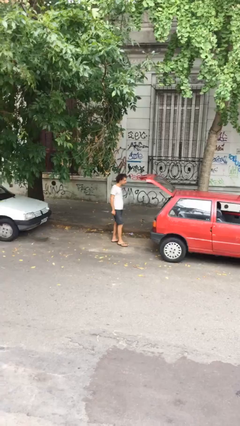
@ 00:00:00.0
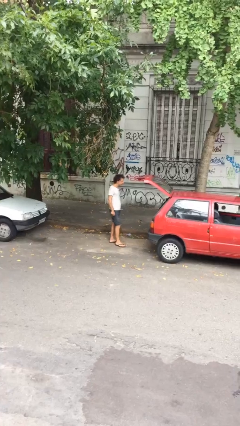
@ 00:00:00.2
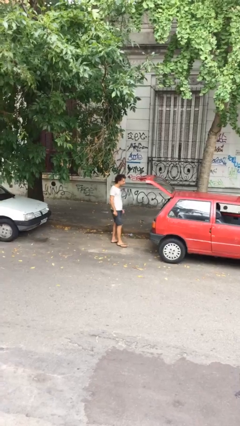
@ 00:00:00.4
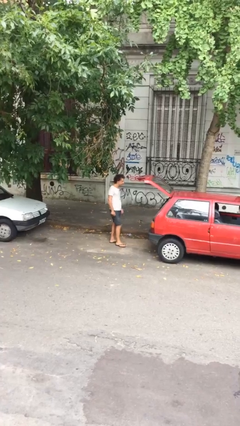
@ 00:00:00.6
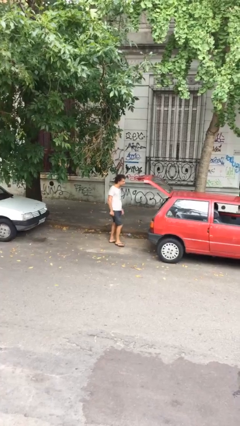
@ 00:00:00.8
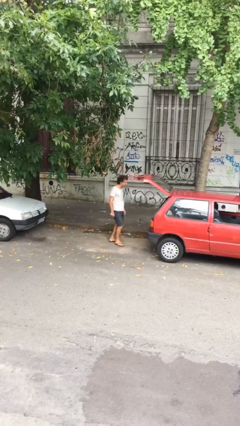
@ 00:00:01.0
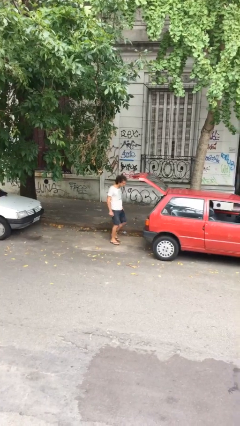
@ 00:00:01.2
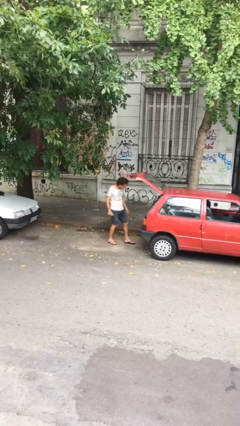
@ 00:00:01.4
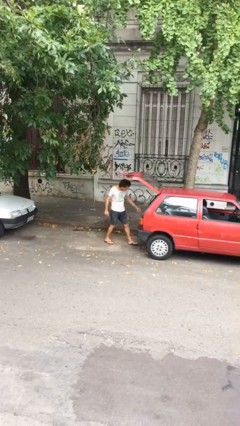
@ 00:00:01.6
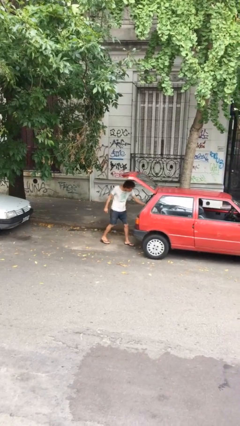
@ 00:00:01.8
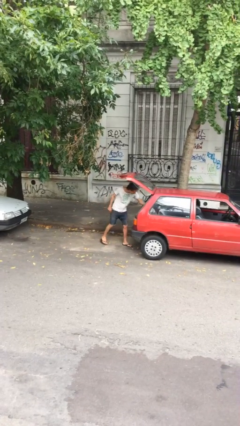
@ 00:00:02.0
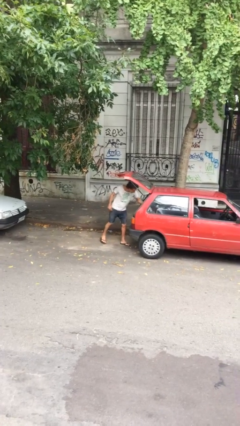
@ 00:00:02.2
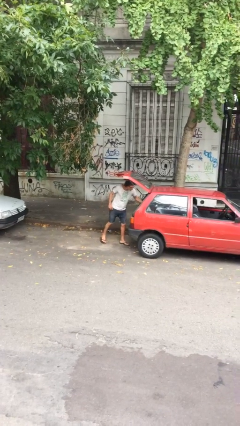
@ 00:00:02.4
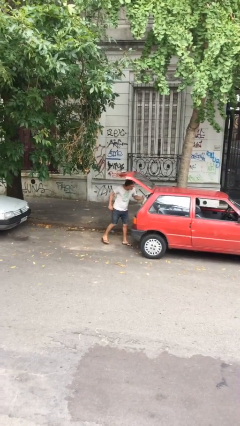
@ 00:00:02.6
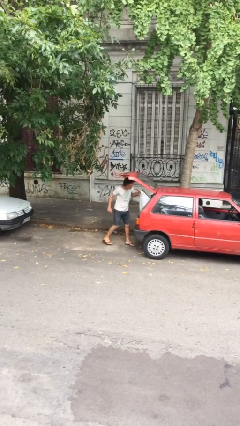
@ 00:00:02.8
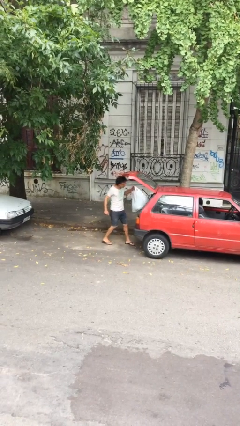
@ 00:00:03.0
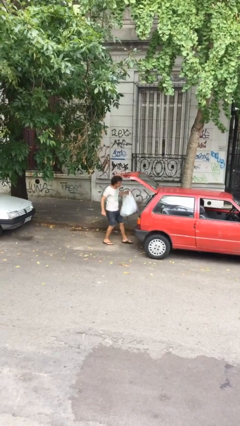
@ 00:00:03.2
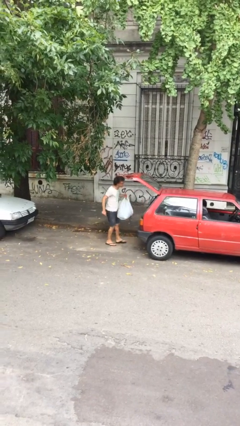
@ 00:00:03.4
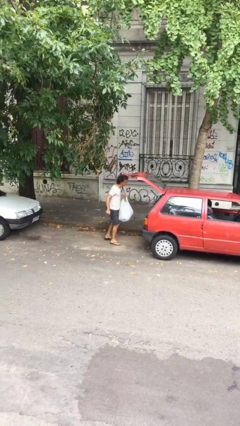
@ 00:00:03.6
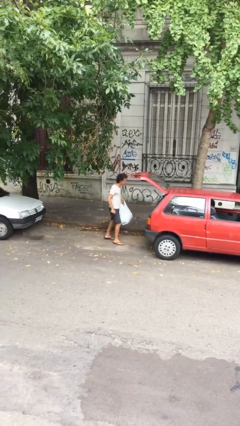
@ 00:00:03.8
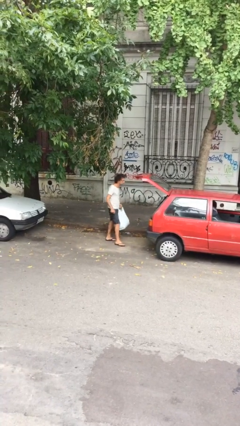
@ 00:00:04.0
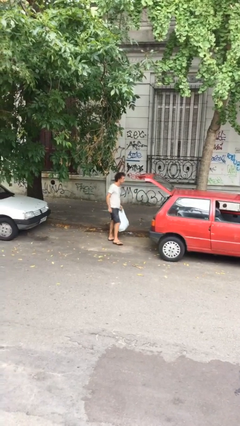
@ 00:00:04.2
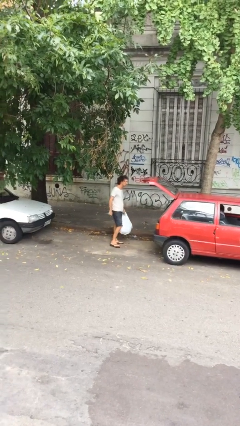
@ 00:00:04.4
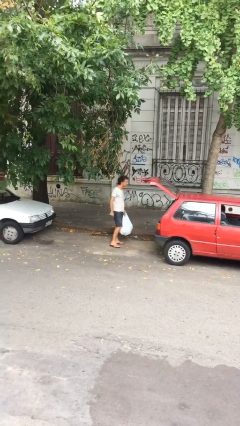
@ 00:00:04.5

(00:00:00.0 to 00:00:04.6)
person unloads car

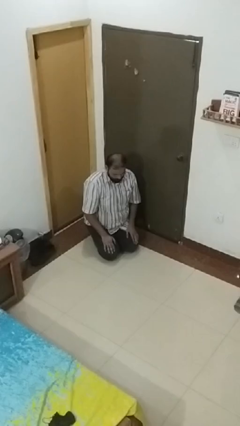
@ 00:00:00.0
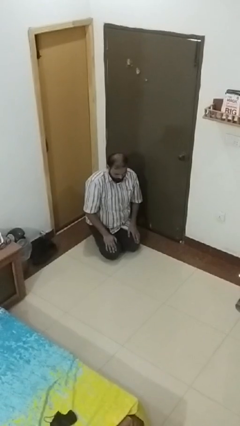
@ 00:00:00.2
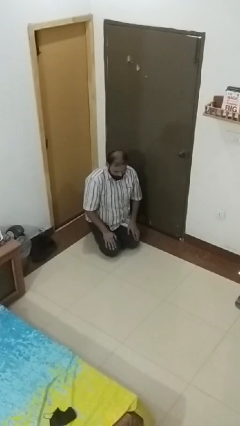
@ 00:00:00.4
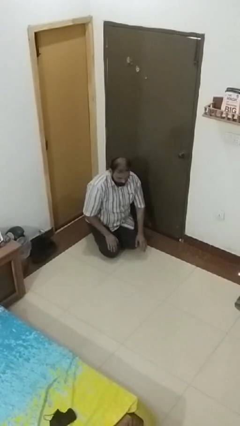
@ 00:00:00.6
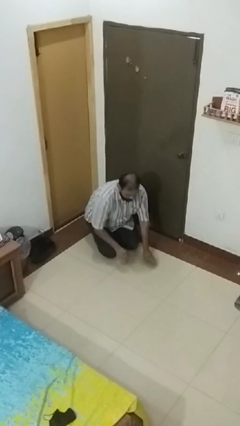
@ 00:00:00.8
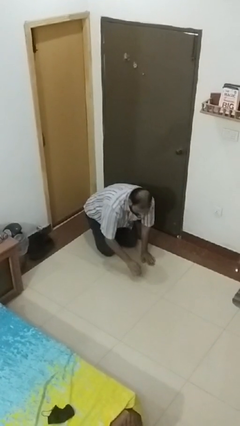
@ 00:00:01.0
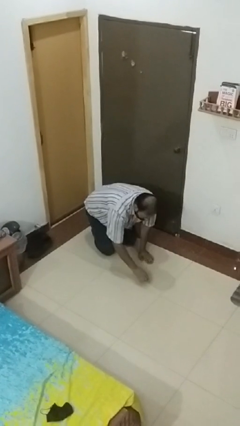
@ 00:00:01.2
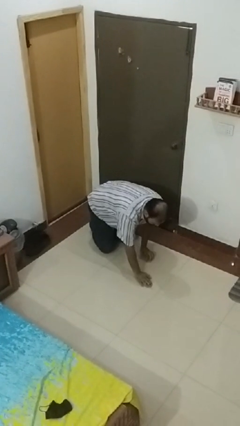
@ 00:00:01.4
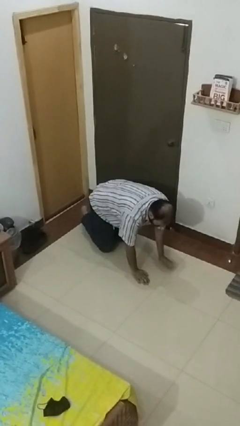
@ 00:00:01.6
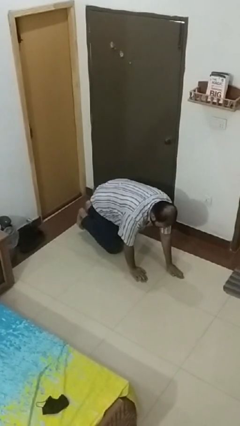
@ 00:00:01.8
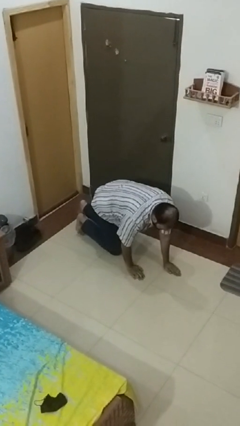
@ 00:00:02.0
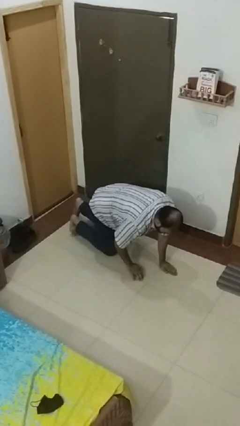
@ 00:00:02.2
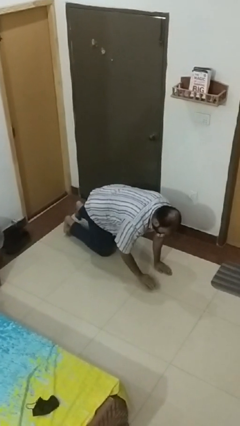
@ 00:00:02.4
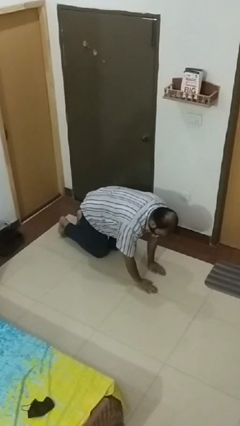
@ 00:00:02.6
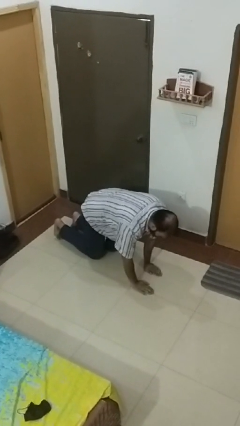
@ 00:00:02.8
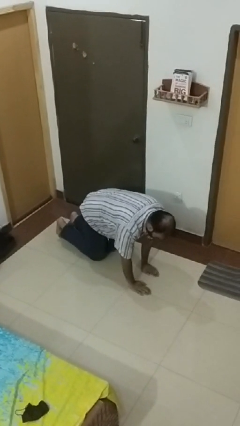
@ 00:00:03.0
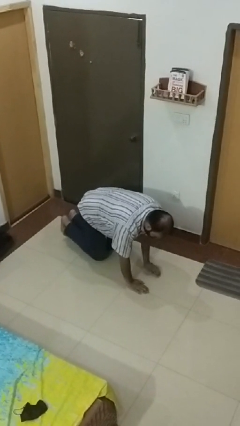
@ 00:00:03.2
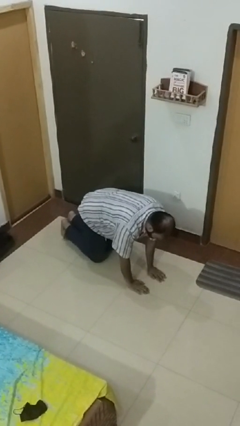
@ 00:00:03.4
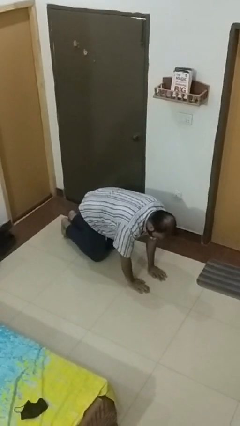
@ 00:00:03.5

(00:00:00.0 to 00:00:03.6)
person crawls

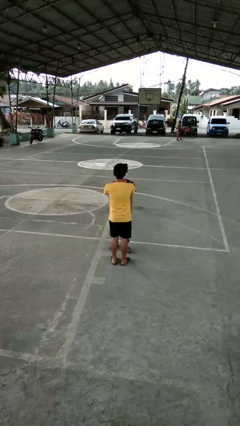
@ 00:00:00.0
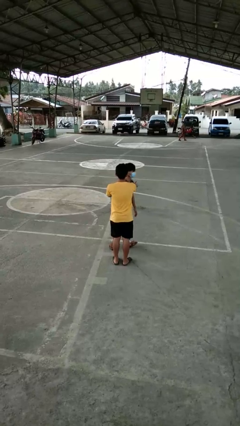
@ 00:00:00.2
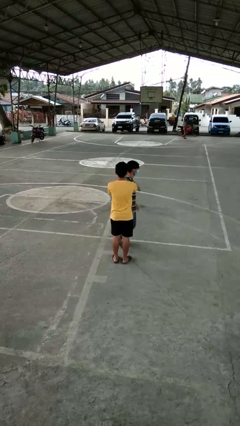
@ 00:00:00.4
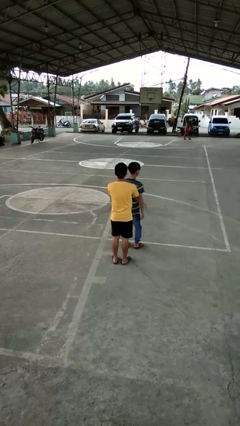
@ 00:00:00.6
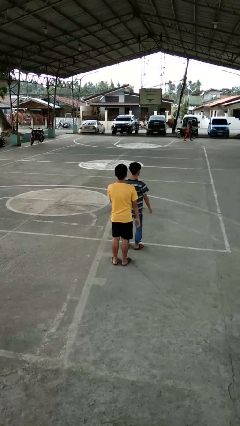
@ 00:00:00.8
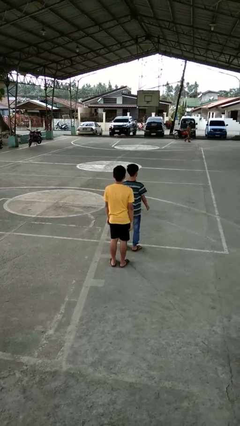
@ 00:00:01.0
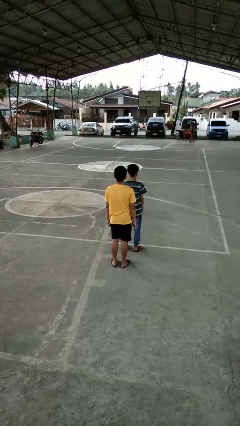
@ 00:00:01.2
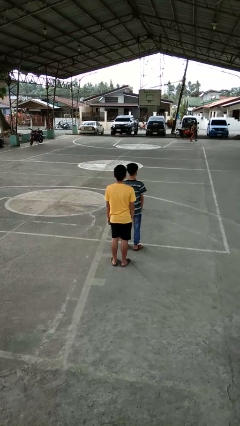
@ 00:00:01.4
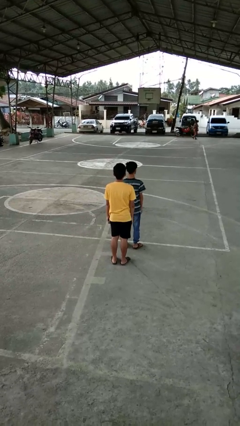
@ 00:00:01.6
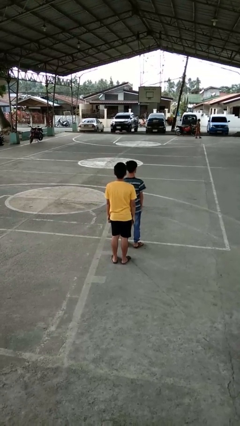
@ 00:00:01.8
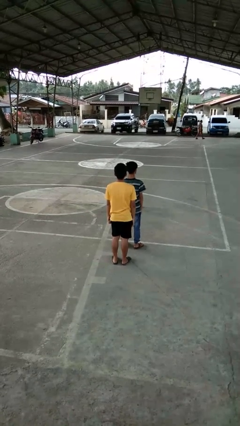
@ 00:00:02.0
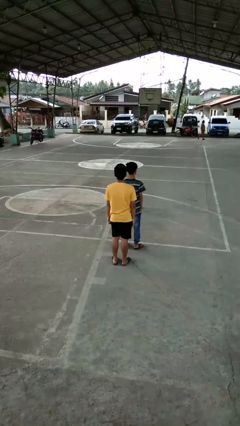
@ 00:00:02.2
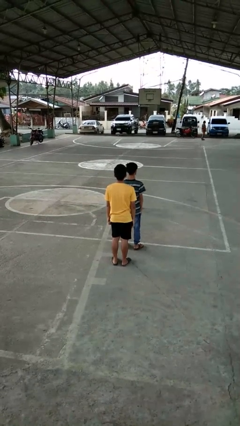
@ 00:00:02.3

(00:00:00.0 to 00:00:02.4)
person spins person around

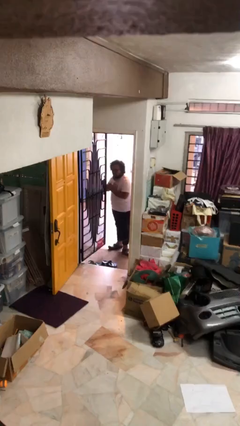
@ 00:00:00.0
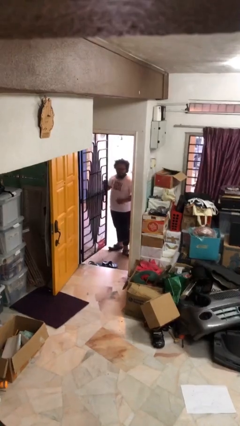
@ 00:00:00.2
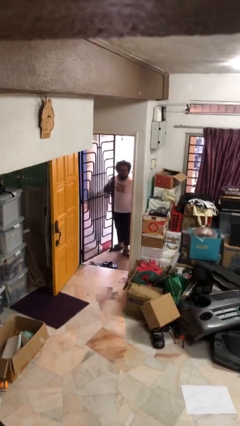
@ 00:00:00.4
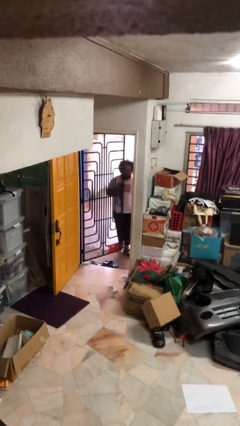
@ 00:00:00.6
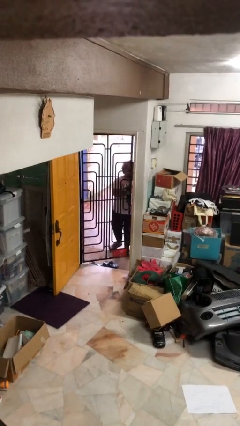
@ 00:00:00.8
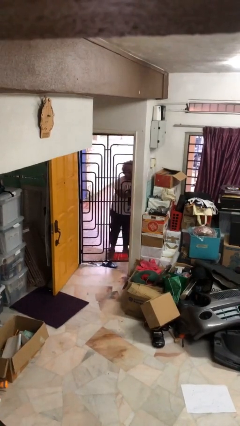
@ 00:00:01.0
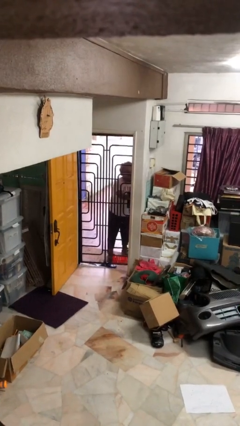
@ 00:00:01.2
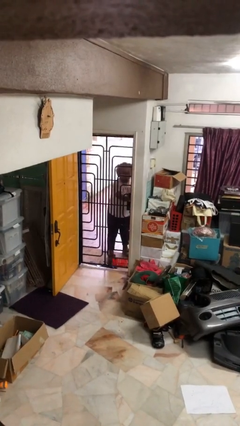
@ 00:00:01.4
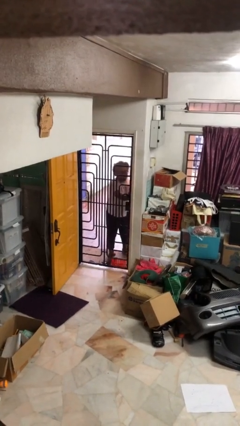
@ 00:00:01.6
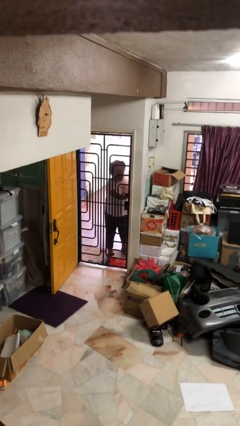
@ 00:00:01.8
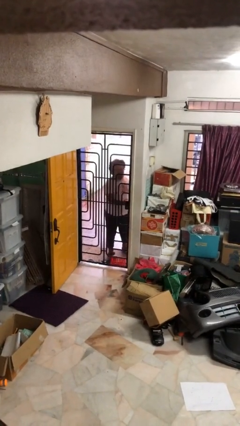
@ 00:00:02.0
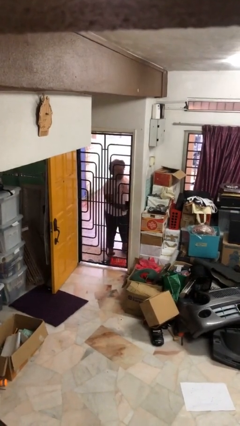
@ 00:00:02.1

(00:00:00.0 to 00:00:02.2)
person closes facility door

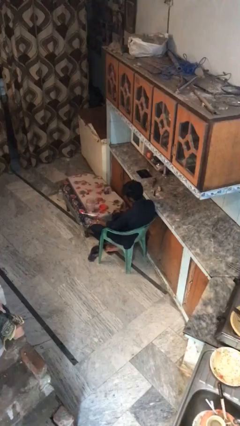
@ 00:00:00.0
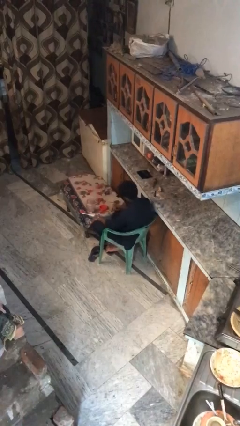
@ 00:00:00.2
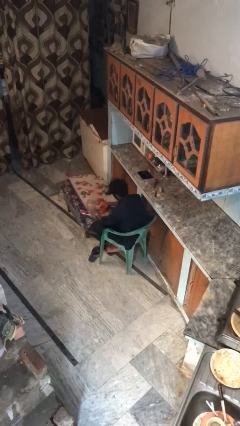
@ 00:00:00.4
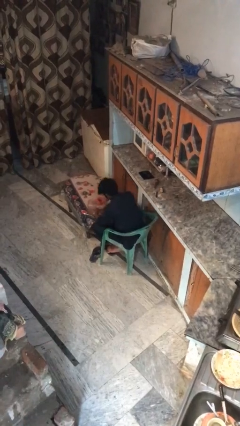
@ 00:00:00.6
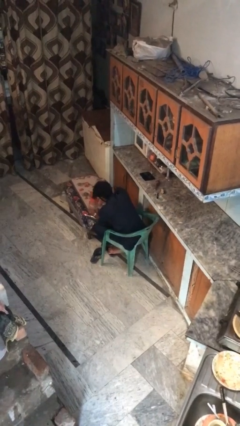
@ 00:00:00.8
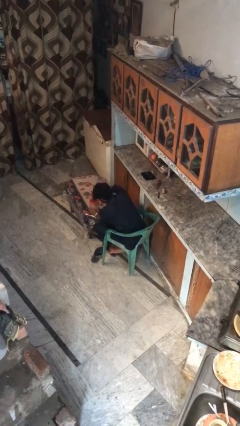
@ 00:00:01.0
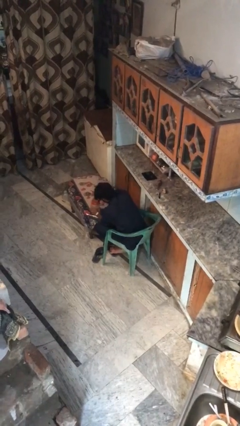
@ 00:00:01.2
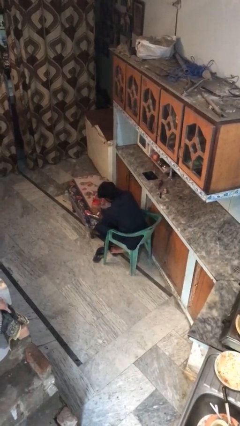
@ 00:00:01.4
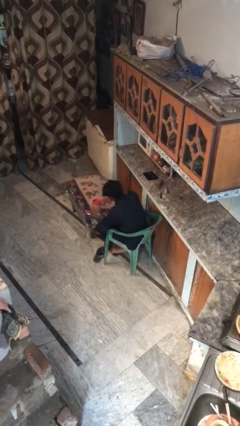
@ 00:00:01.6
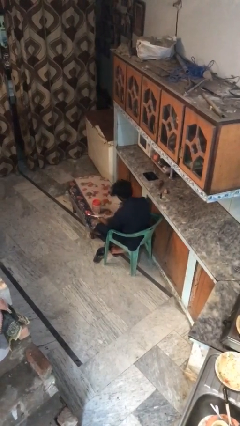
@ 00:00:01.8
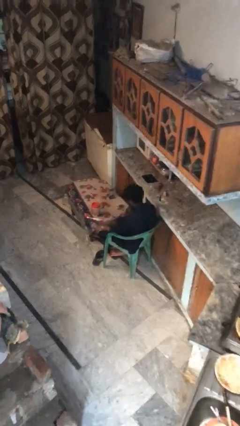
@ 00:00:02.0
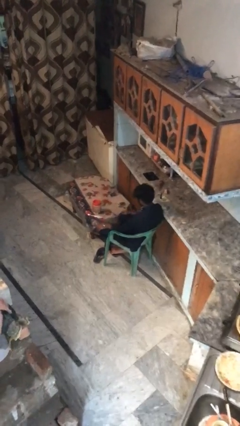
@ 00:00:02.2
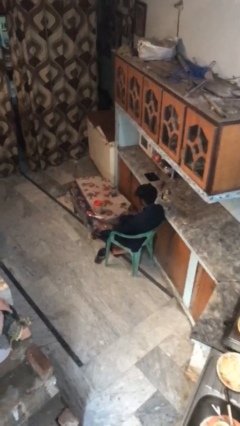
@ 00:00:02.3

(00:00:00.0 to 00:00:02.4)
person closes jar

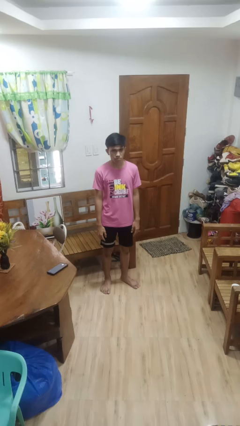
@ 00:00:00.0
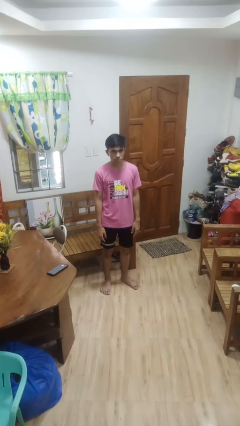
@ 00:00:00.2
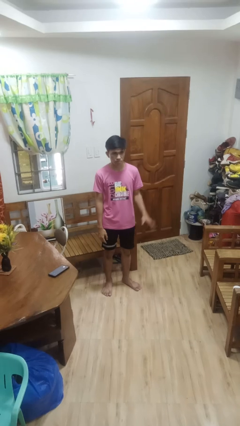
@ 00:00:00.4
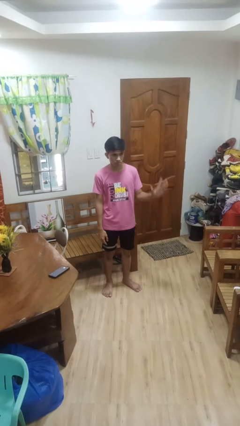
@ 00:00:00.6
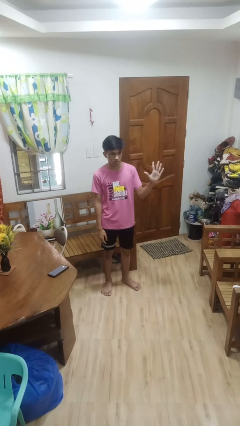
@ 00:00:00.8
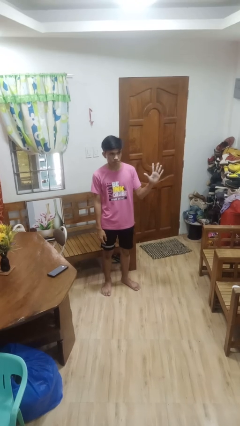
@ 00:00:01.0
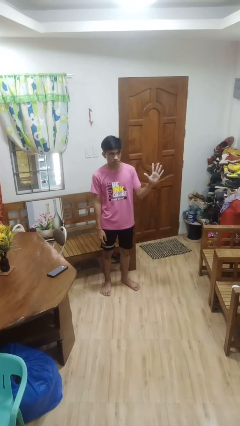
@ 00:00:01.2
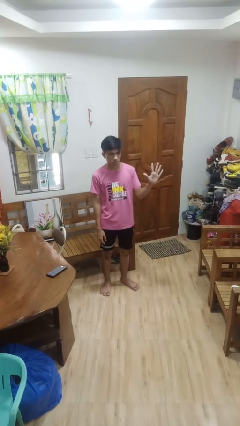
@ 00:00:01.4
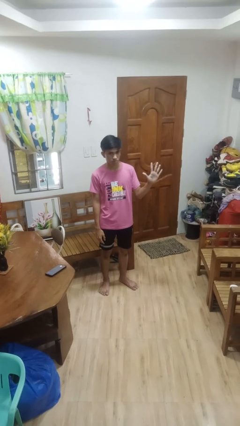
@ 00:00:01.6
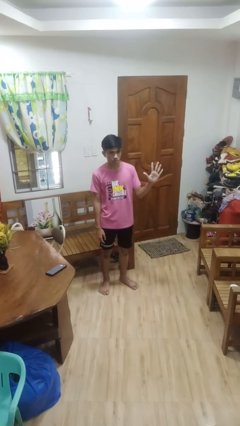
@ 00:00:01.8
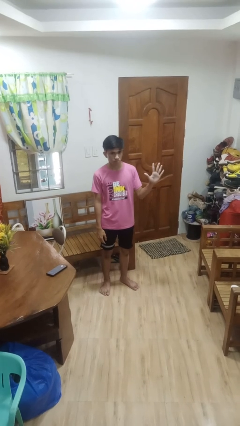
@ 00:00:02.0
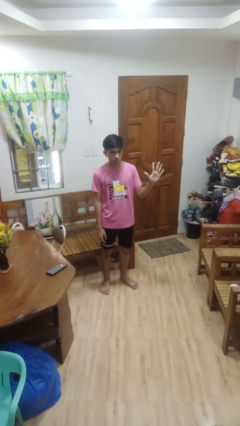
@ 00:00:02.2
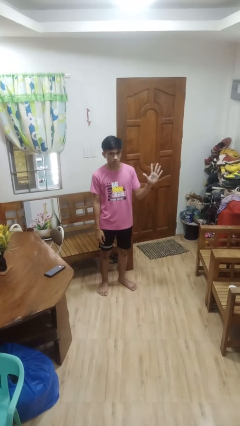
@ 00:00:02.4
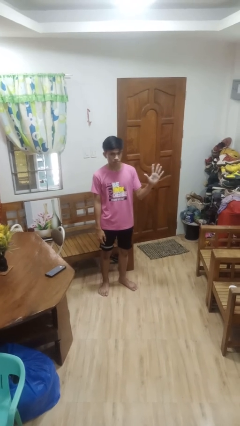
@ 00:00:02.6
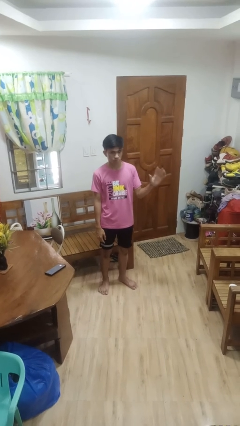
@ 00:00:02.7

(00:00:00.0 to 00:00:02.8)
person gestures number five
